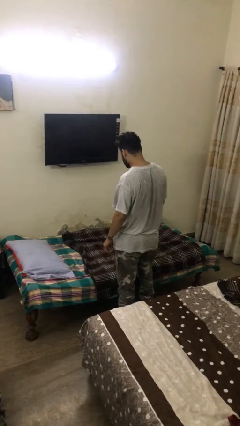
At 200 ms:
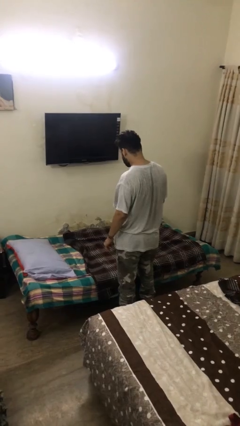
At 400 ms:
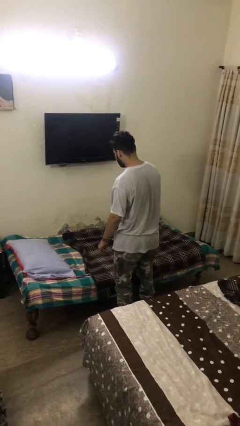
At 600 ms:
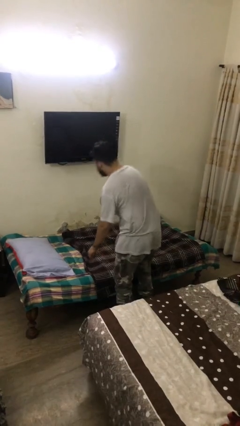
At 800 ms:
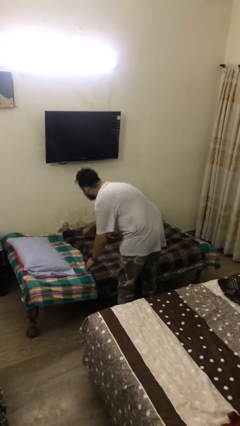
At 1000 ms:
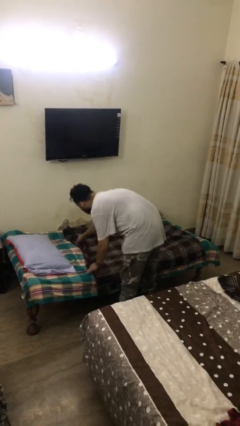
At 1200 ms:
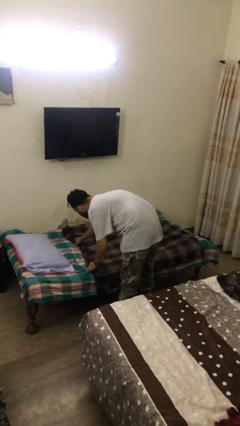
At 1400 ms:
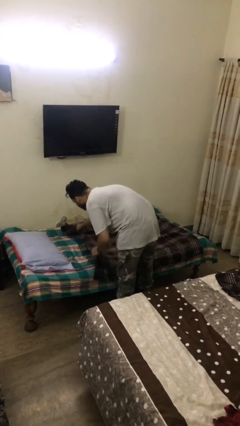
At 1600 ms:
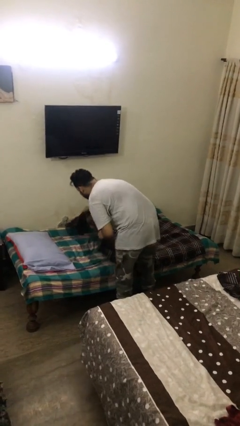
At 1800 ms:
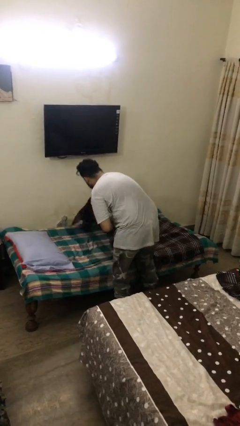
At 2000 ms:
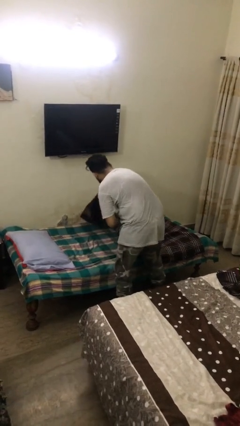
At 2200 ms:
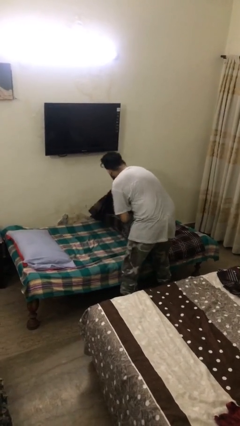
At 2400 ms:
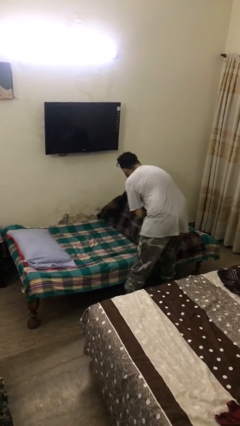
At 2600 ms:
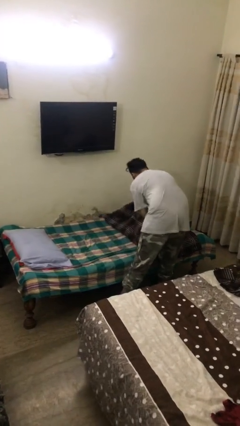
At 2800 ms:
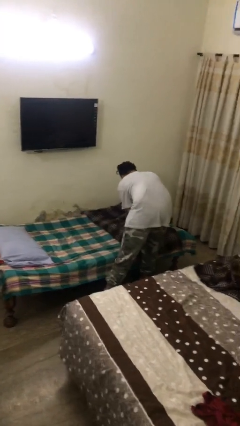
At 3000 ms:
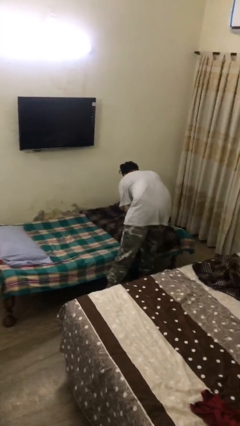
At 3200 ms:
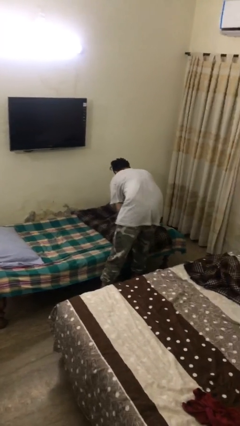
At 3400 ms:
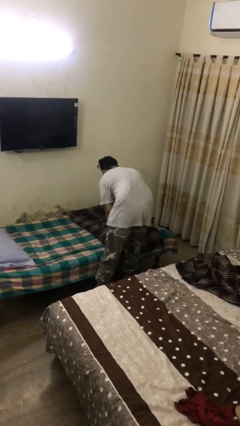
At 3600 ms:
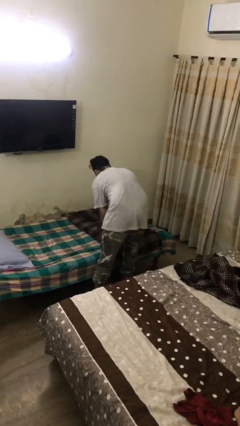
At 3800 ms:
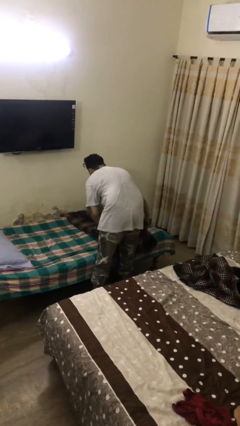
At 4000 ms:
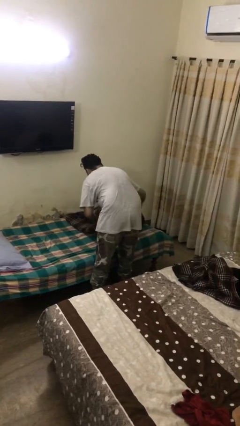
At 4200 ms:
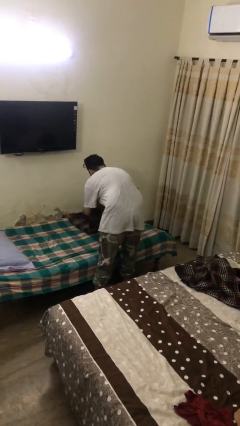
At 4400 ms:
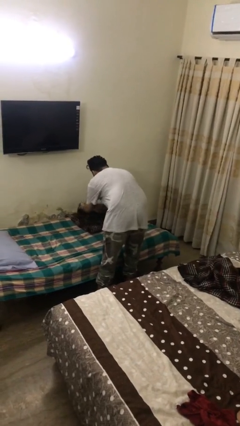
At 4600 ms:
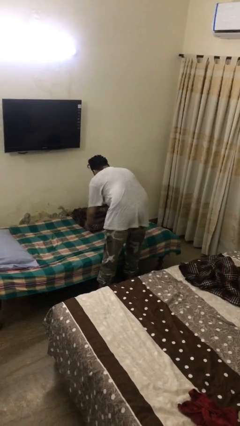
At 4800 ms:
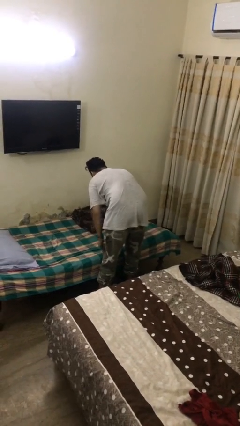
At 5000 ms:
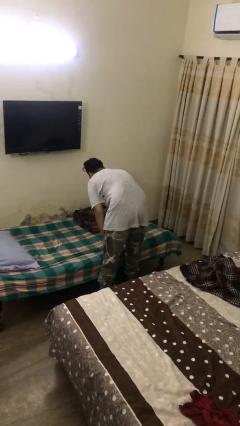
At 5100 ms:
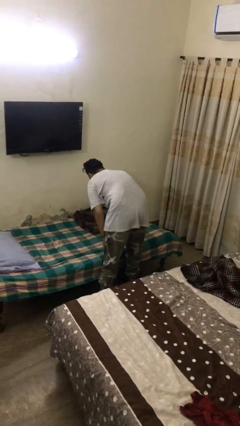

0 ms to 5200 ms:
person folds blanket

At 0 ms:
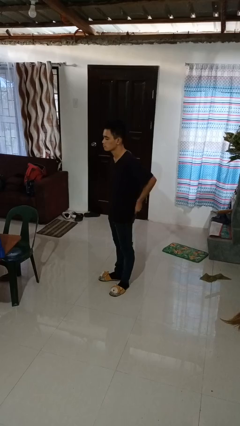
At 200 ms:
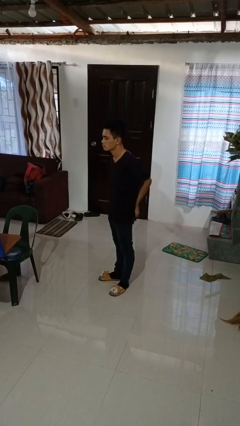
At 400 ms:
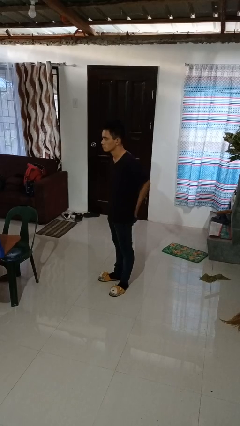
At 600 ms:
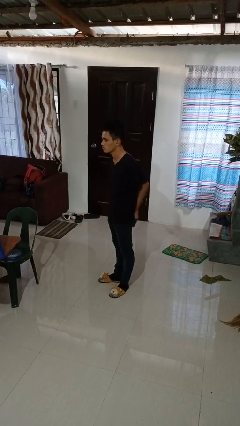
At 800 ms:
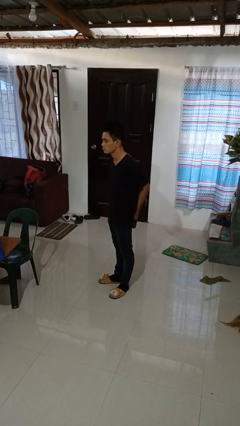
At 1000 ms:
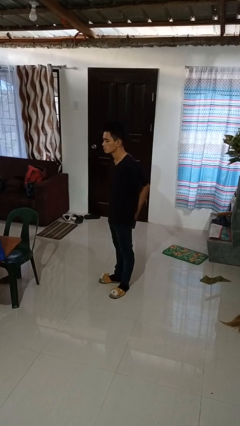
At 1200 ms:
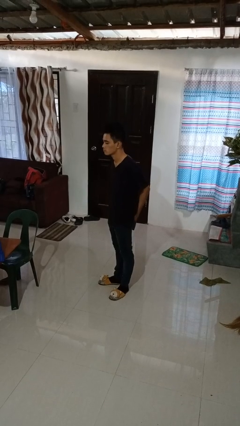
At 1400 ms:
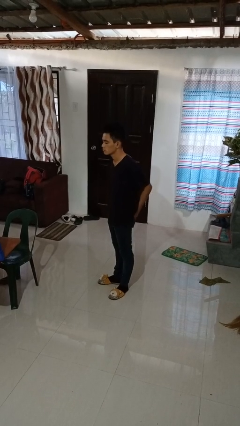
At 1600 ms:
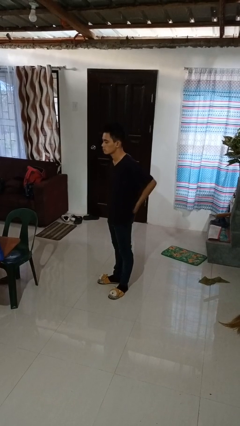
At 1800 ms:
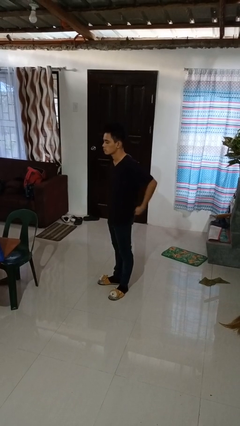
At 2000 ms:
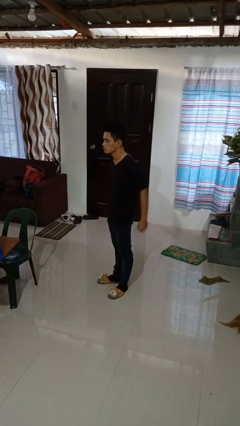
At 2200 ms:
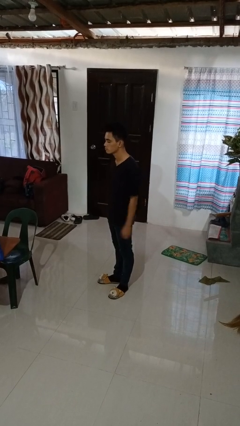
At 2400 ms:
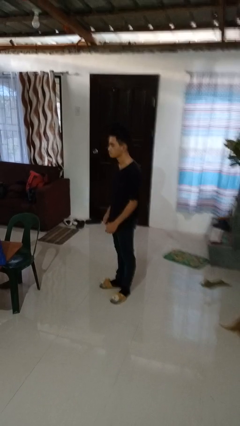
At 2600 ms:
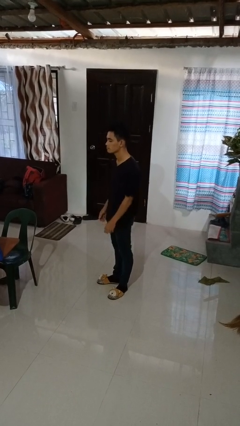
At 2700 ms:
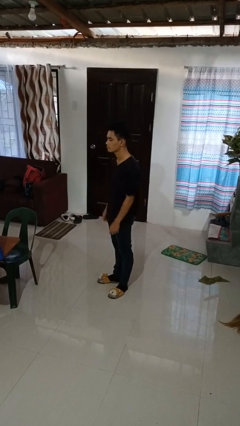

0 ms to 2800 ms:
person puts hands in back pockets

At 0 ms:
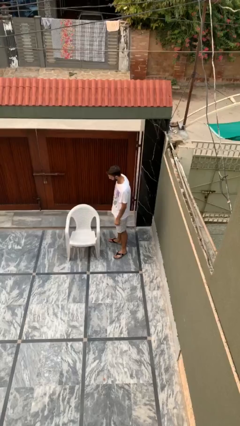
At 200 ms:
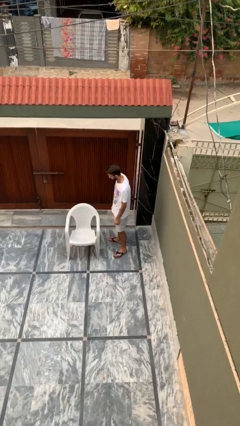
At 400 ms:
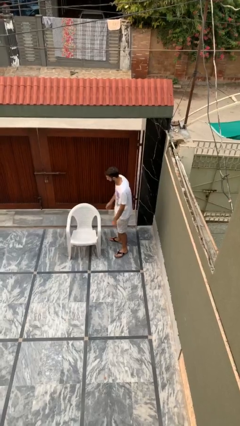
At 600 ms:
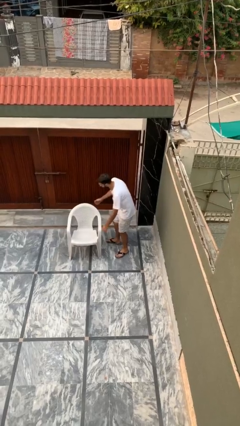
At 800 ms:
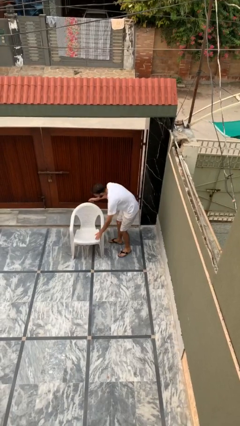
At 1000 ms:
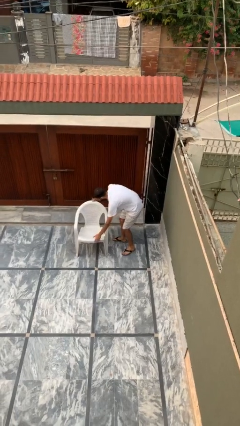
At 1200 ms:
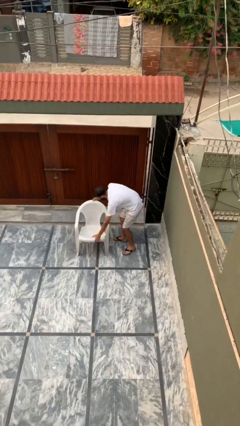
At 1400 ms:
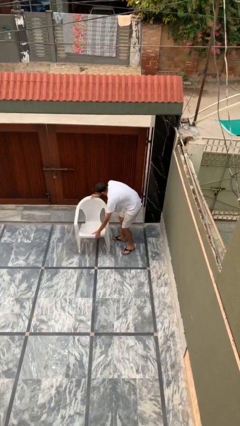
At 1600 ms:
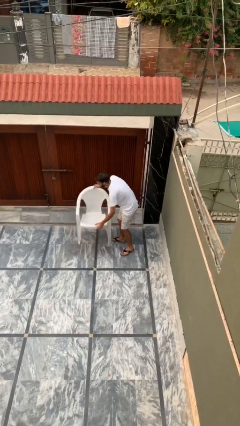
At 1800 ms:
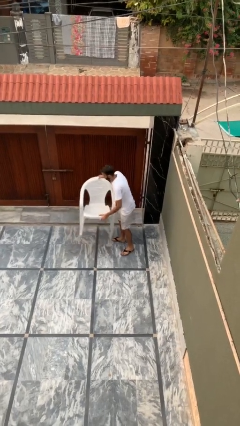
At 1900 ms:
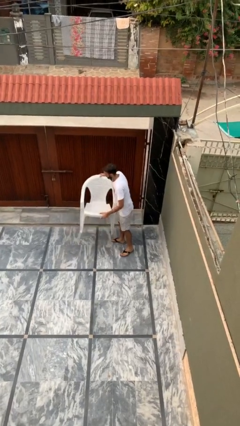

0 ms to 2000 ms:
person picks up object from floor

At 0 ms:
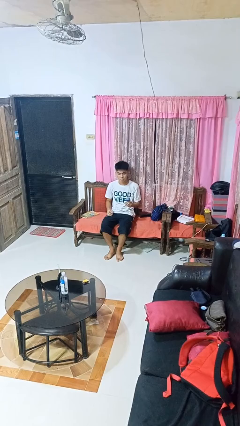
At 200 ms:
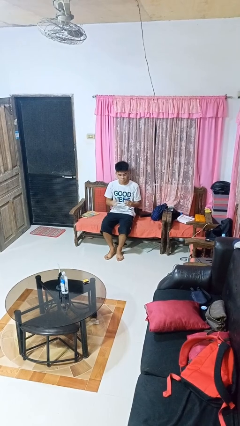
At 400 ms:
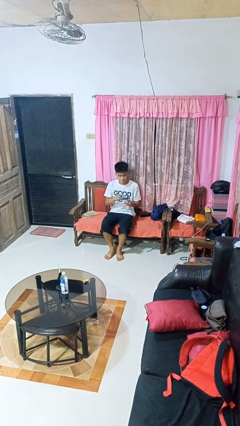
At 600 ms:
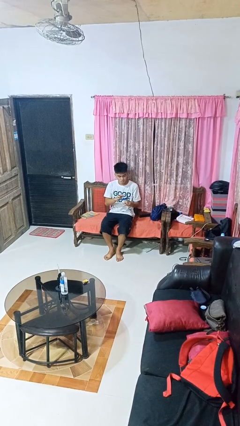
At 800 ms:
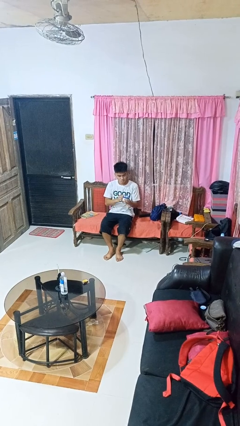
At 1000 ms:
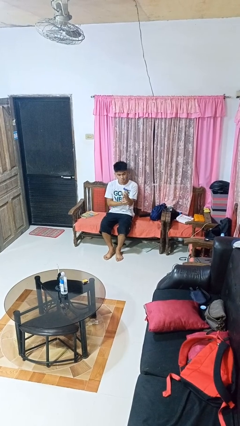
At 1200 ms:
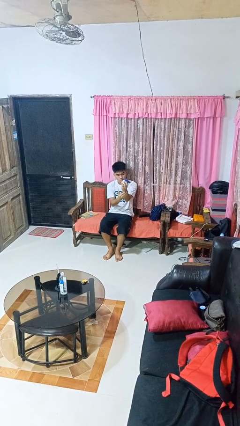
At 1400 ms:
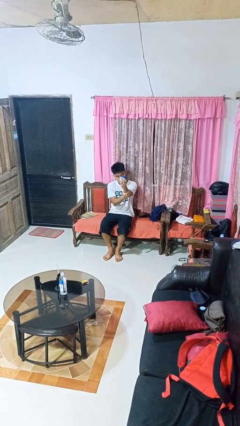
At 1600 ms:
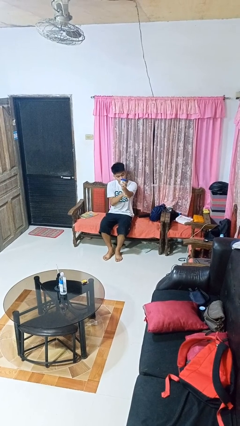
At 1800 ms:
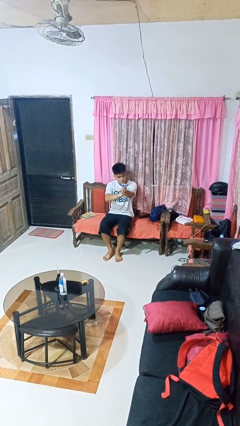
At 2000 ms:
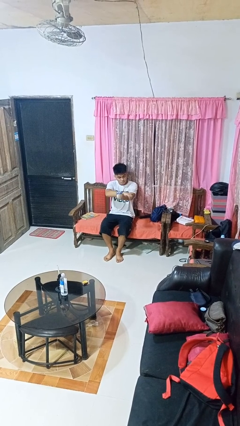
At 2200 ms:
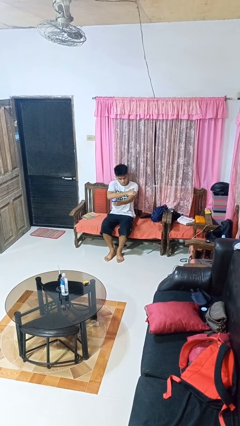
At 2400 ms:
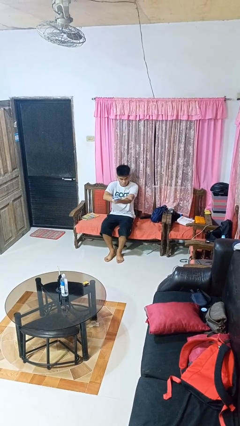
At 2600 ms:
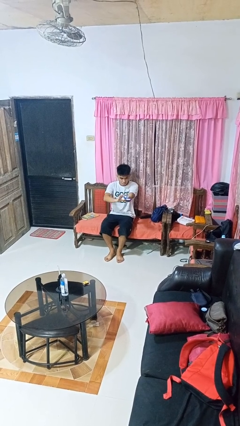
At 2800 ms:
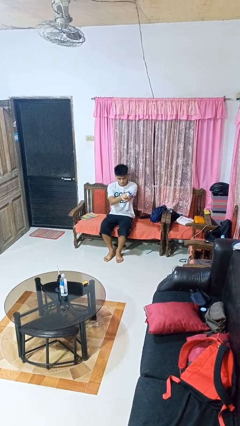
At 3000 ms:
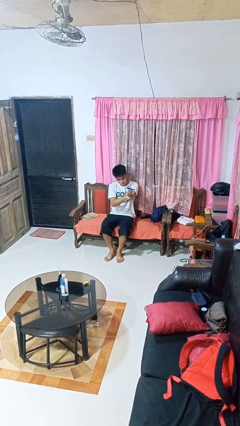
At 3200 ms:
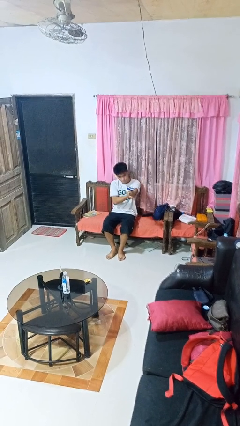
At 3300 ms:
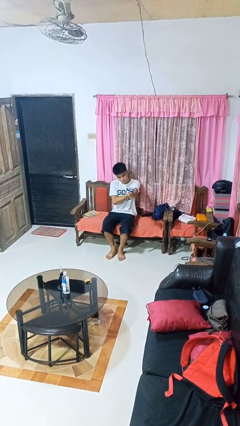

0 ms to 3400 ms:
person applies sunscreen

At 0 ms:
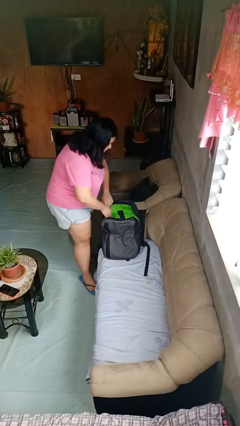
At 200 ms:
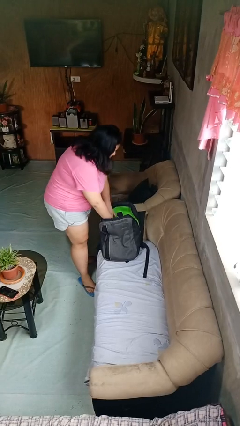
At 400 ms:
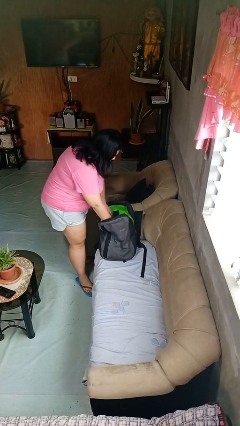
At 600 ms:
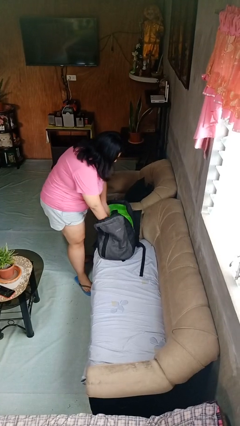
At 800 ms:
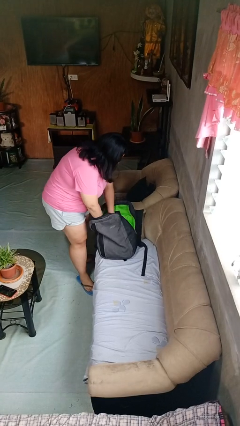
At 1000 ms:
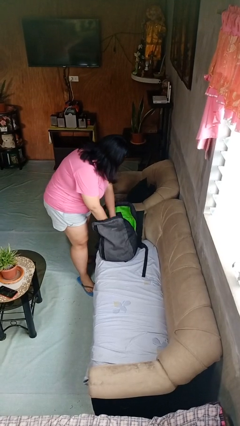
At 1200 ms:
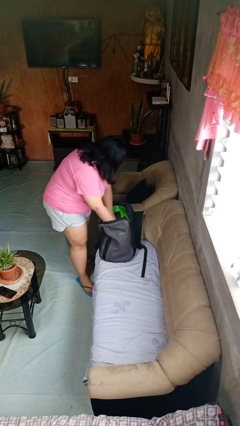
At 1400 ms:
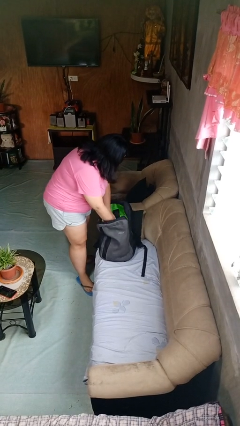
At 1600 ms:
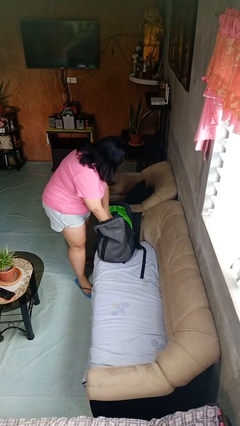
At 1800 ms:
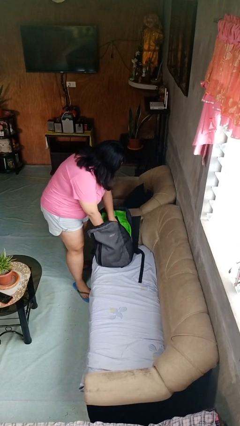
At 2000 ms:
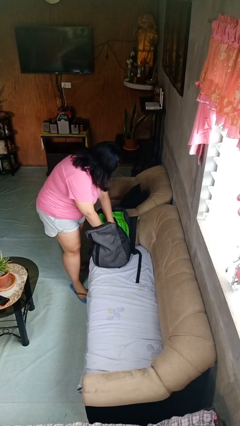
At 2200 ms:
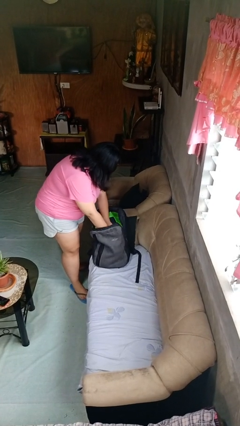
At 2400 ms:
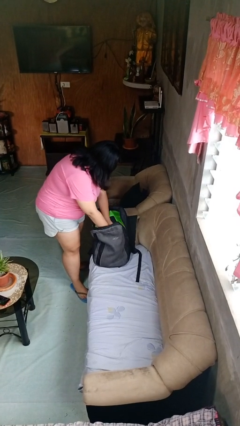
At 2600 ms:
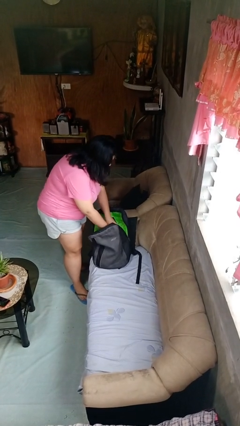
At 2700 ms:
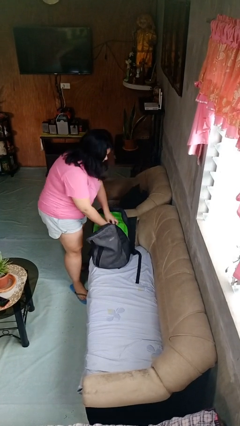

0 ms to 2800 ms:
person searches in backpack

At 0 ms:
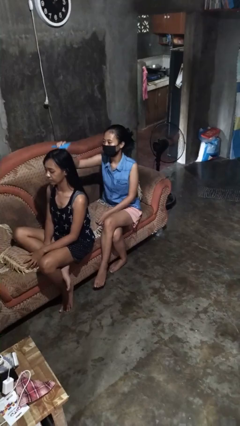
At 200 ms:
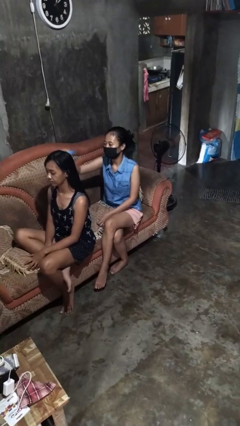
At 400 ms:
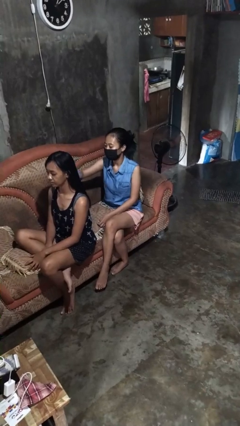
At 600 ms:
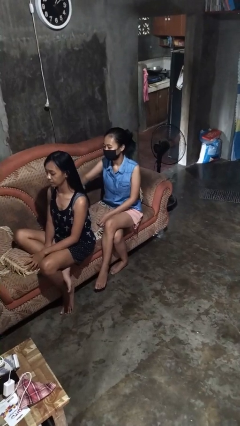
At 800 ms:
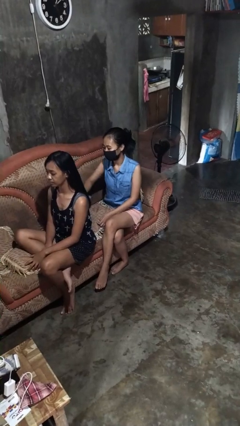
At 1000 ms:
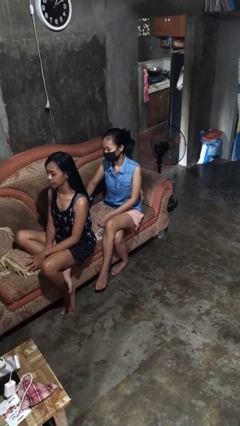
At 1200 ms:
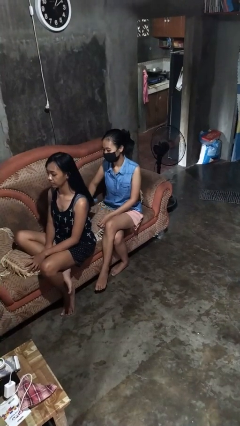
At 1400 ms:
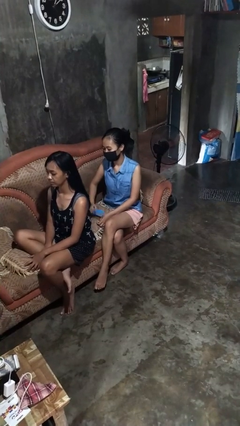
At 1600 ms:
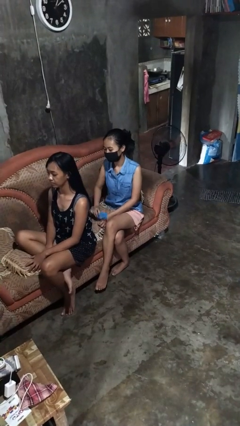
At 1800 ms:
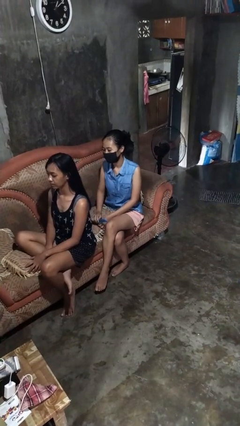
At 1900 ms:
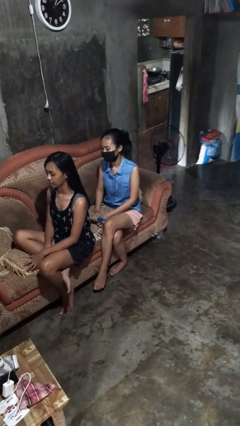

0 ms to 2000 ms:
person brushes hair of person
